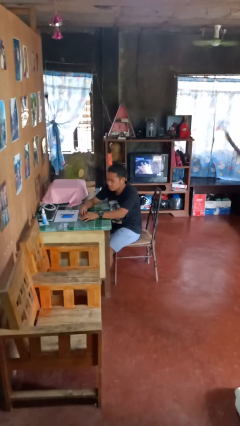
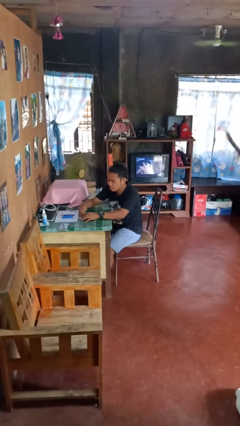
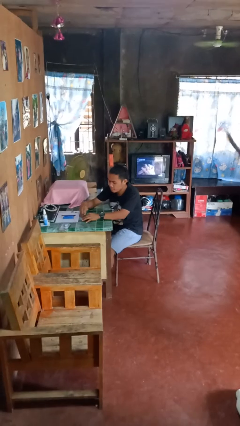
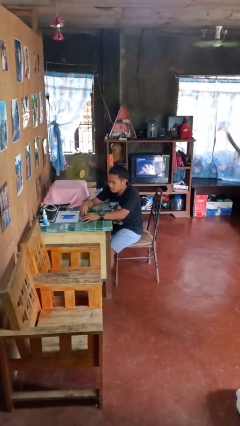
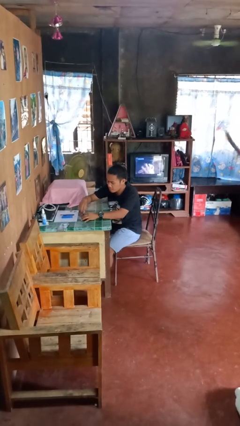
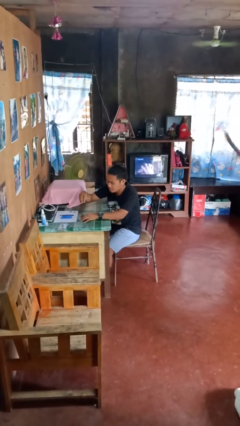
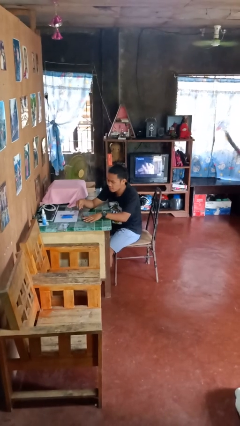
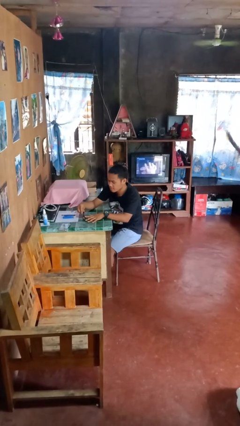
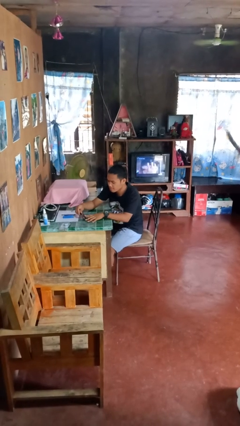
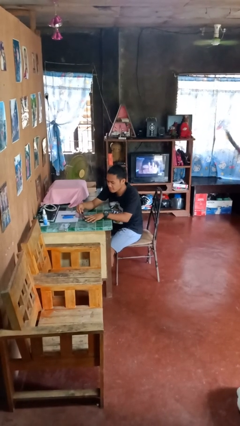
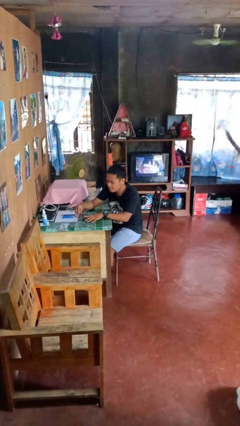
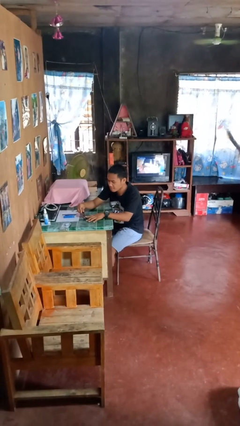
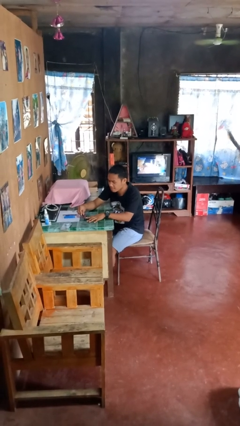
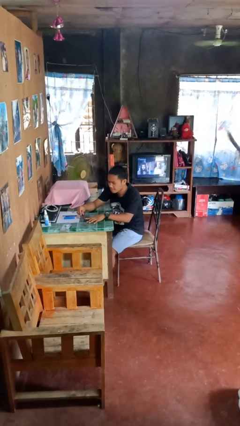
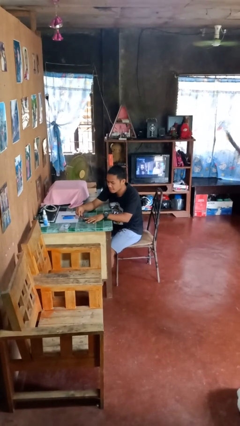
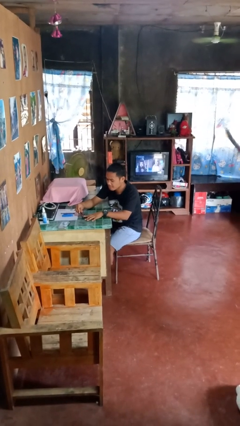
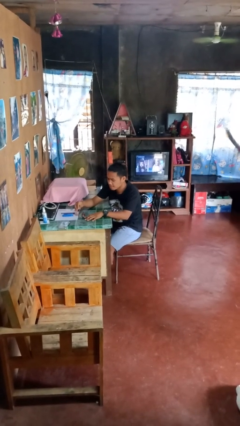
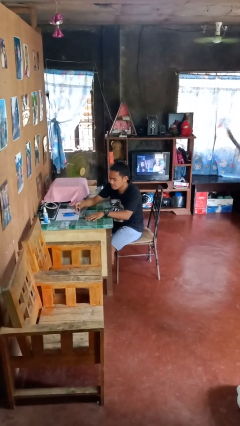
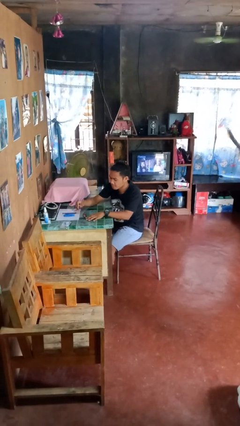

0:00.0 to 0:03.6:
person paints fingernails

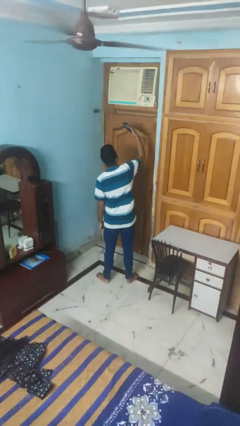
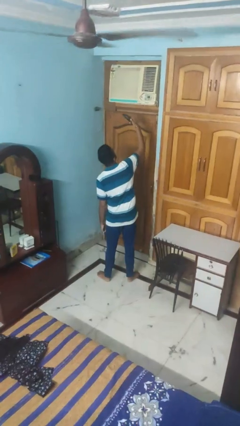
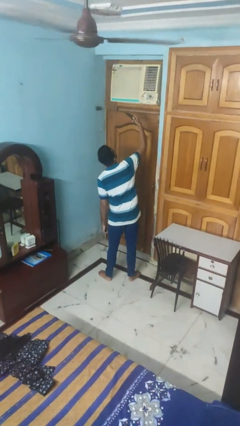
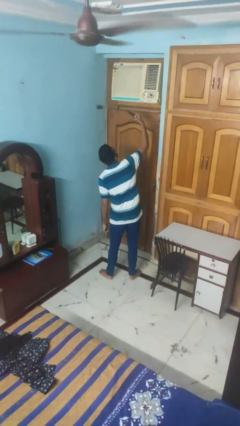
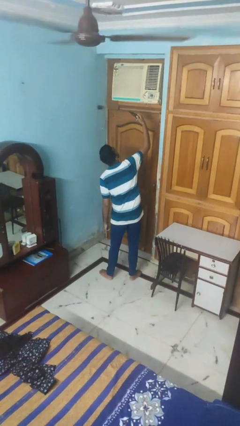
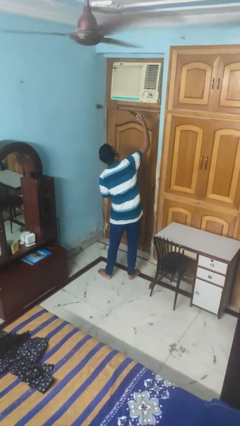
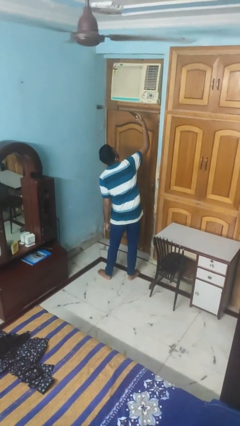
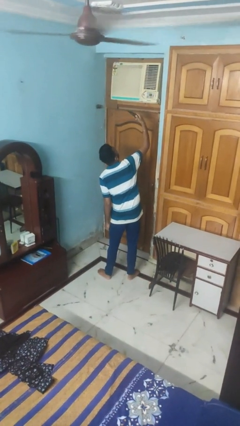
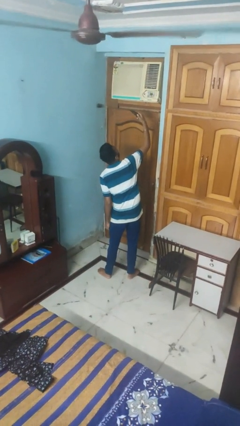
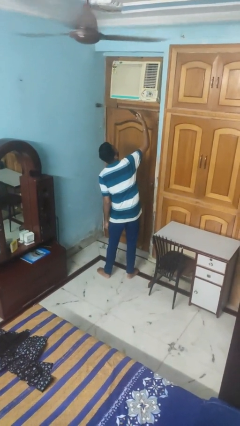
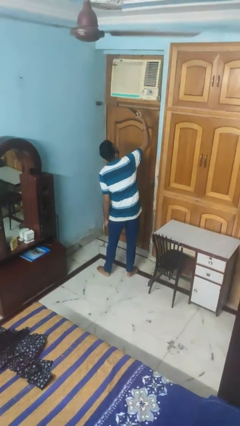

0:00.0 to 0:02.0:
person takes selfie

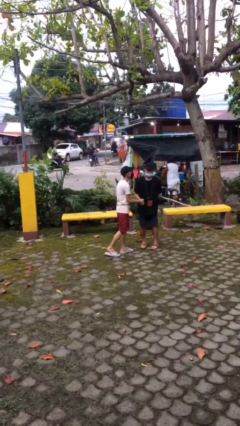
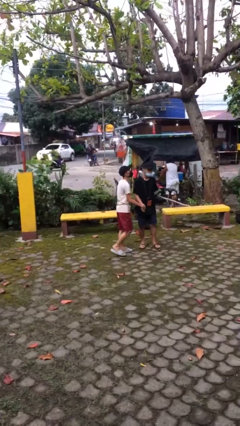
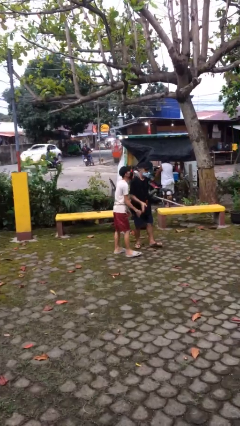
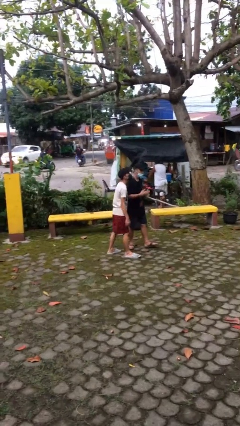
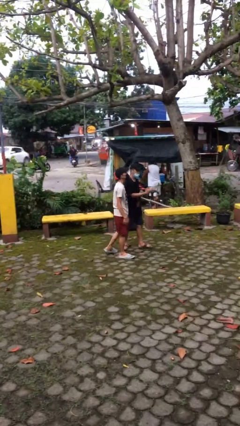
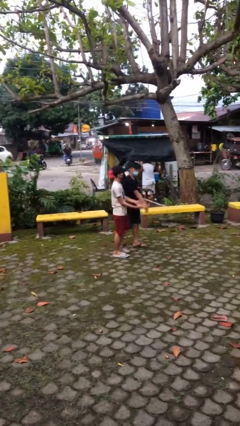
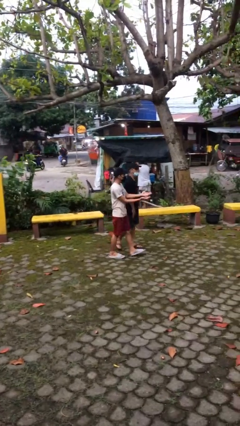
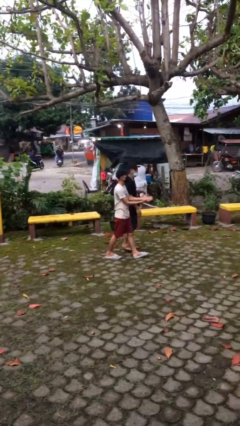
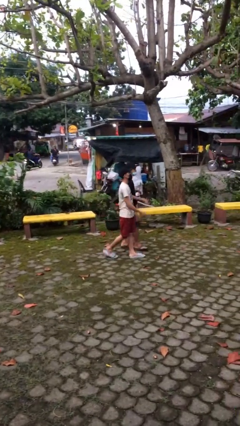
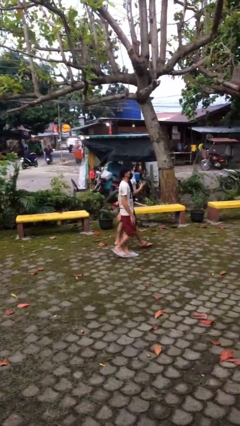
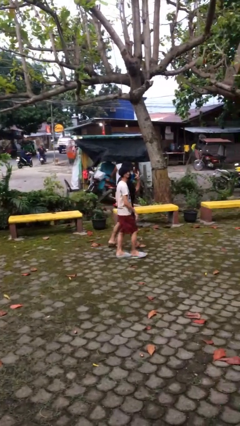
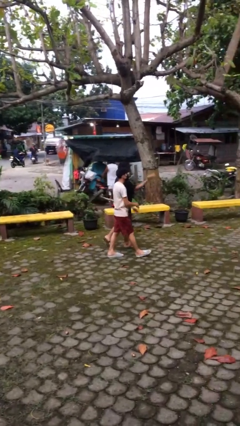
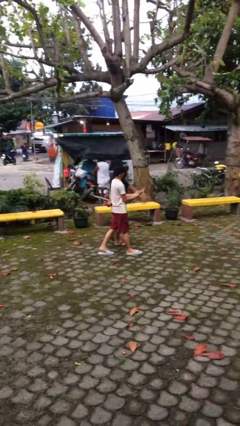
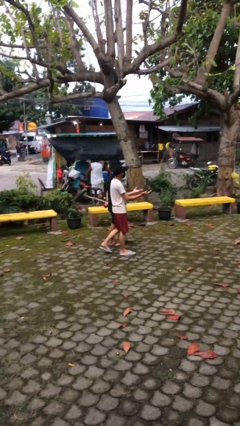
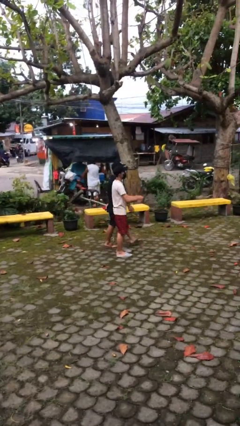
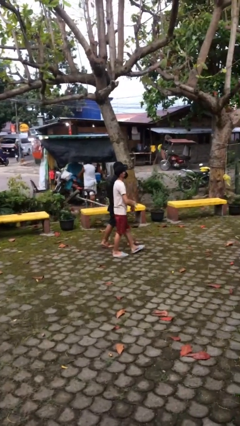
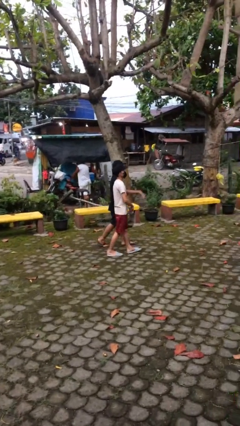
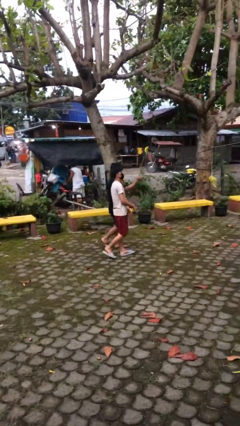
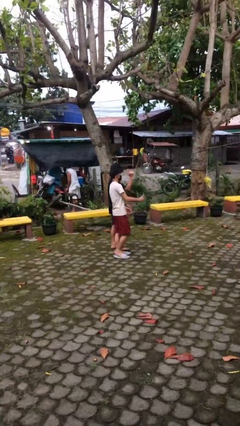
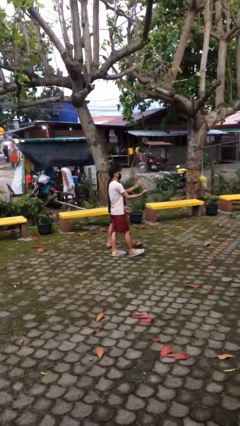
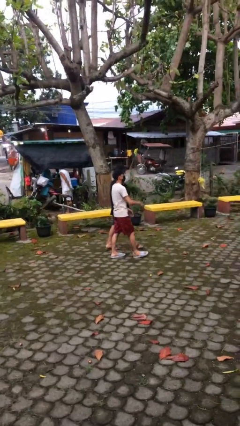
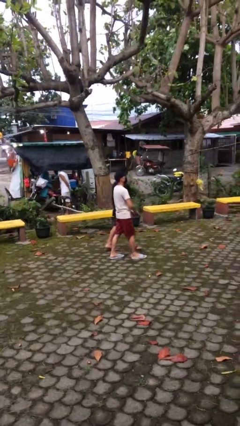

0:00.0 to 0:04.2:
person talks to person

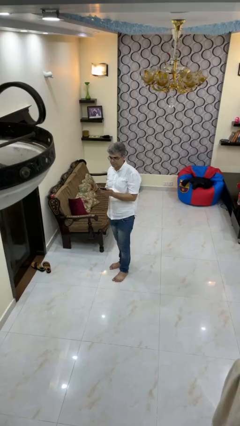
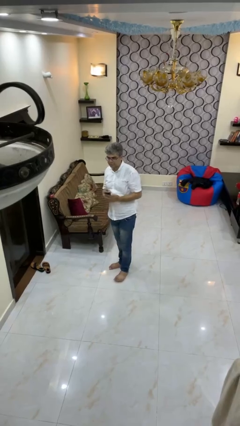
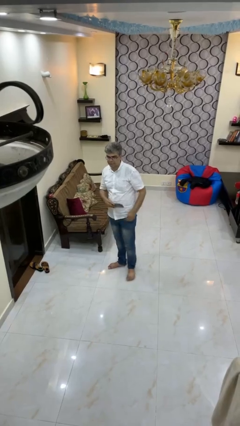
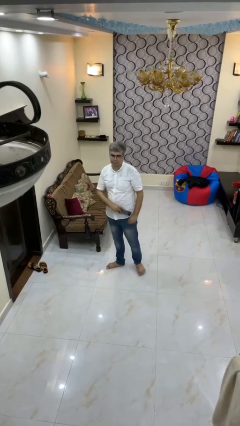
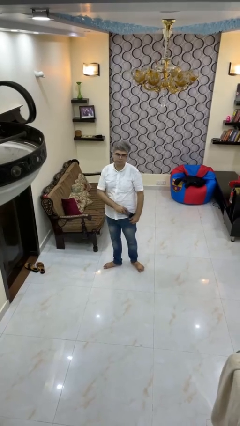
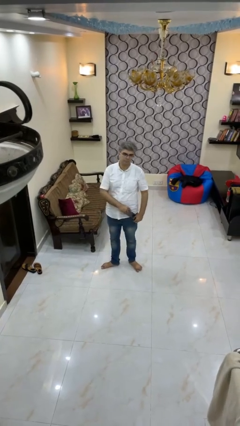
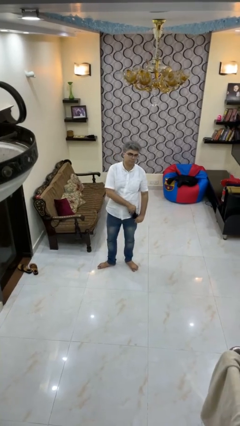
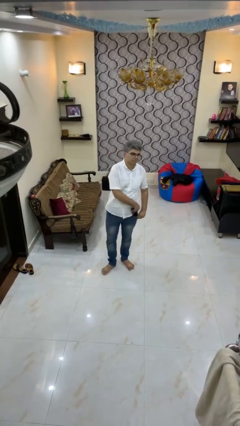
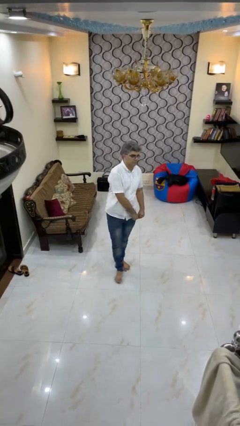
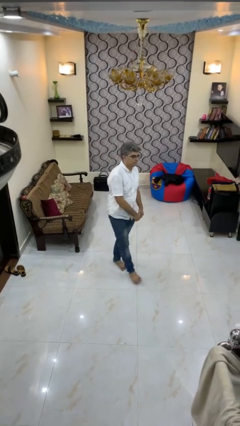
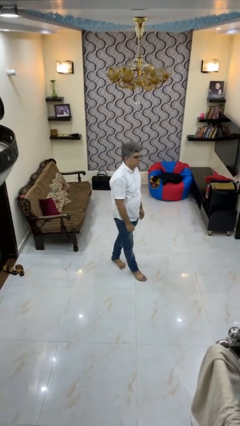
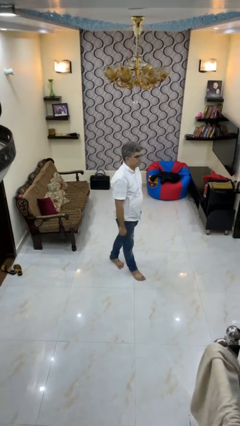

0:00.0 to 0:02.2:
person puts phone into pocket

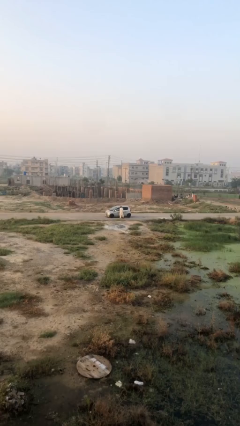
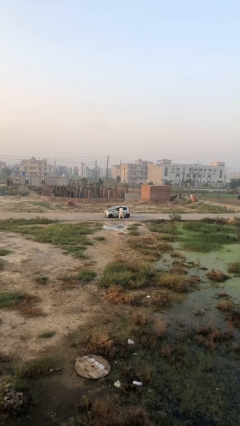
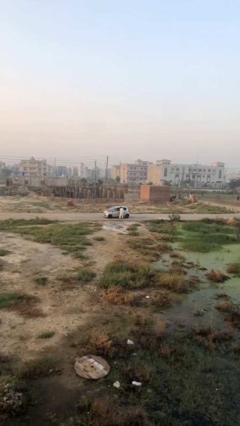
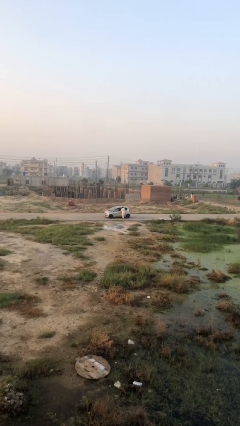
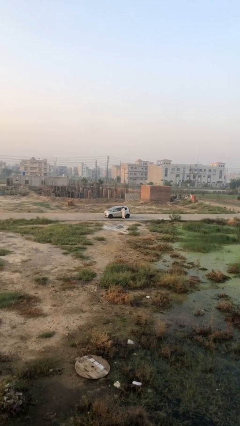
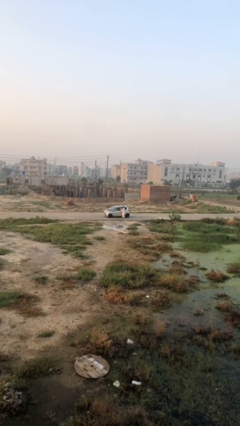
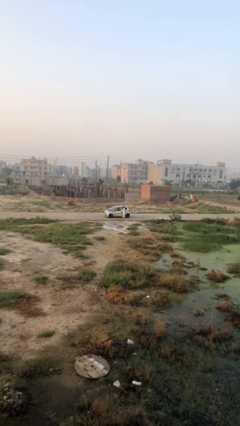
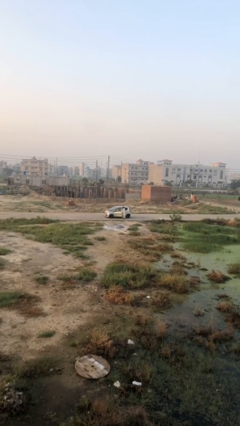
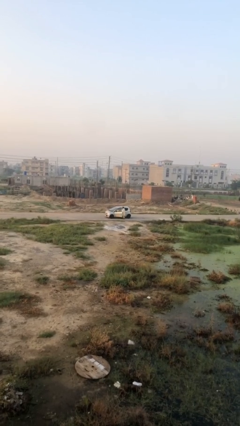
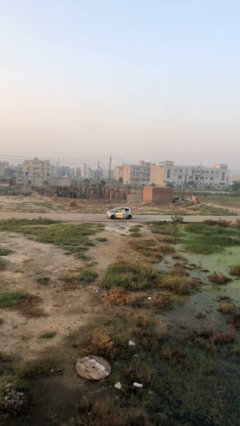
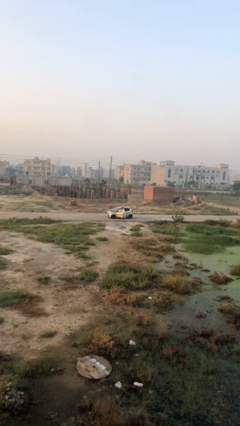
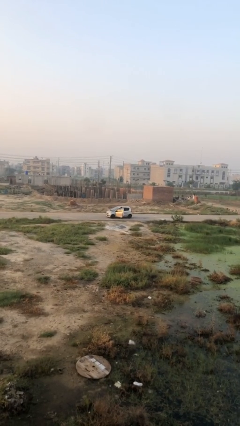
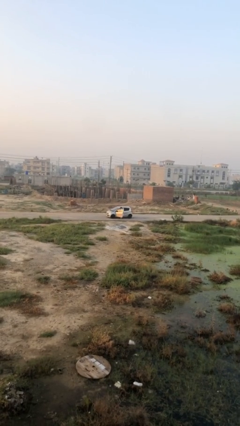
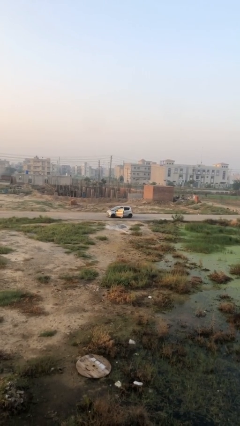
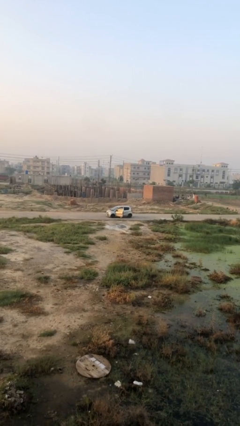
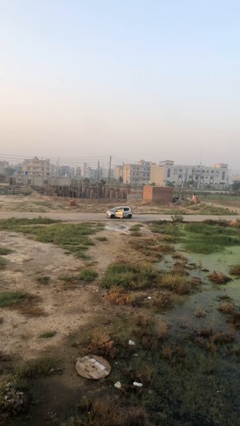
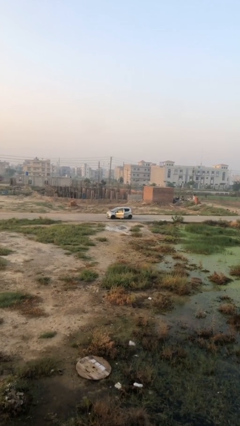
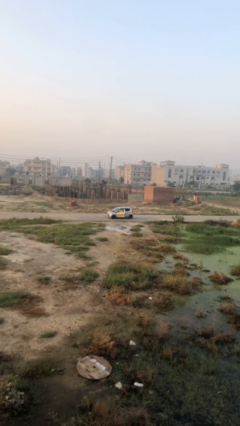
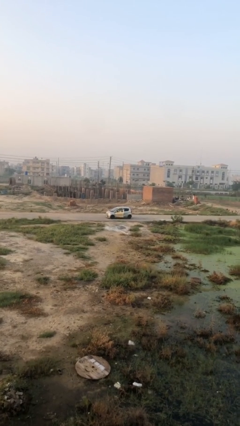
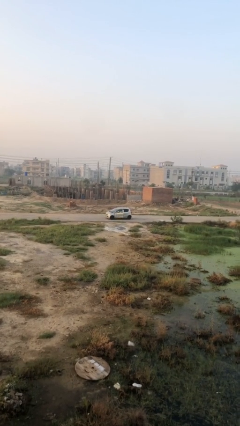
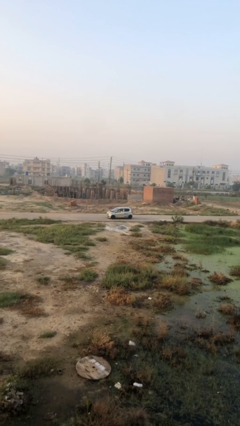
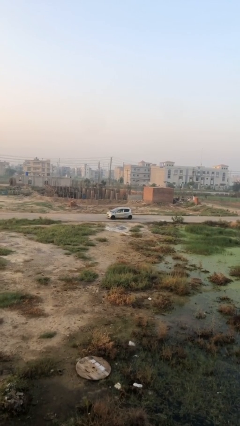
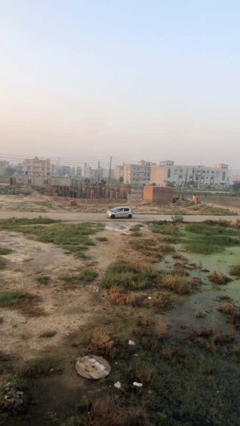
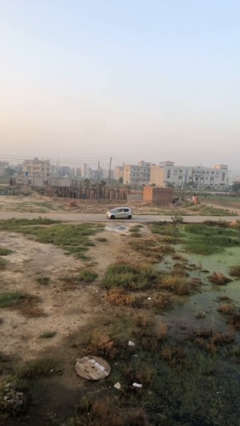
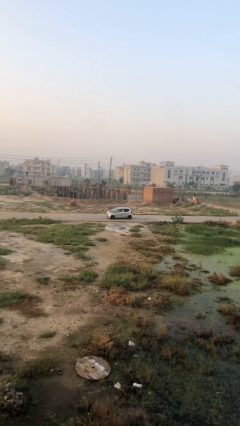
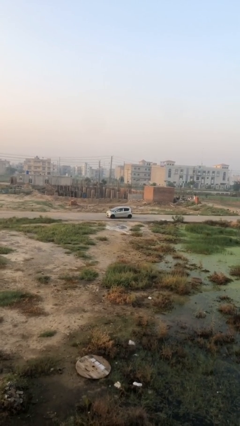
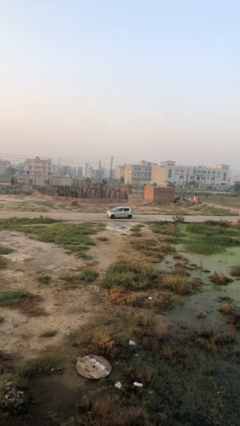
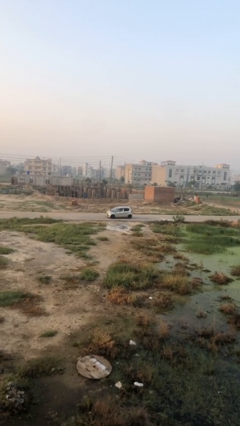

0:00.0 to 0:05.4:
car picks up person
